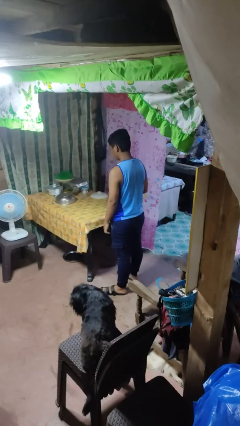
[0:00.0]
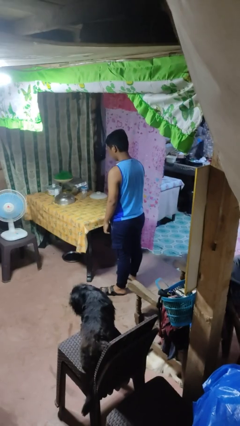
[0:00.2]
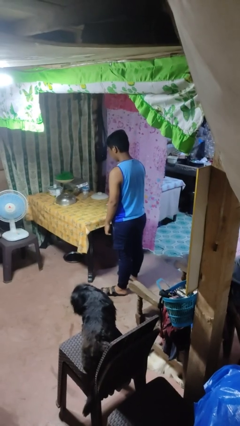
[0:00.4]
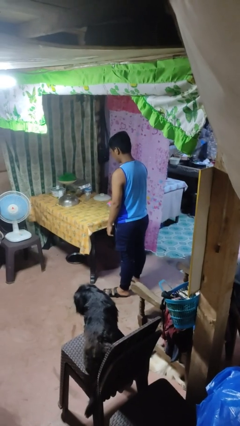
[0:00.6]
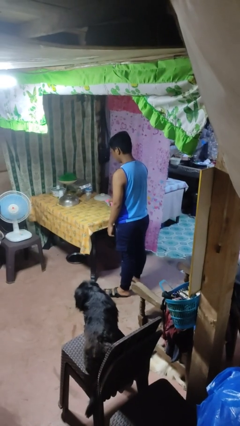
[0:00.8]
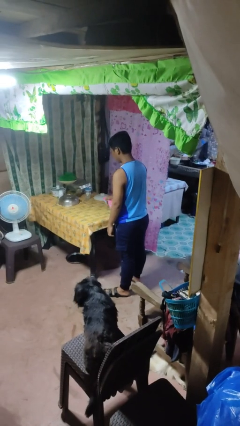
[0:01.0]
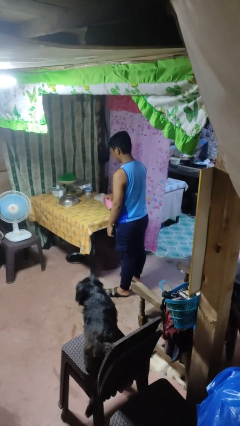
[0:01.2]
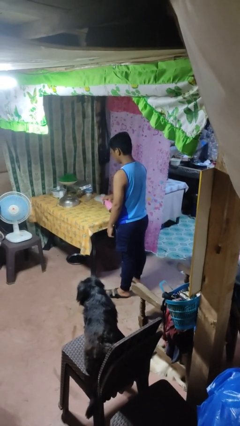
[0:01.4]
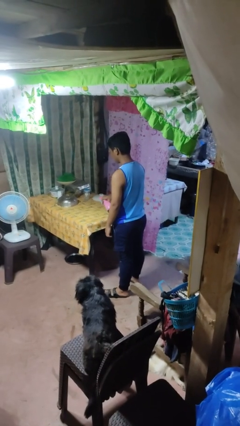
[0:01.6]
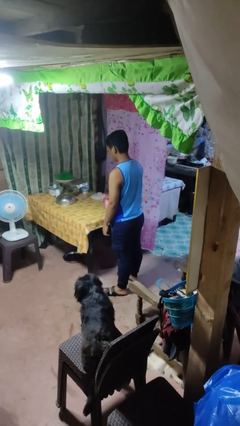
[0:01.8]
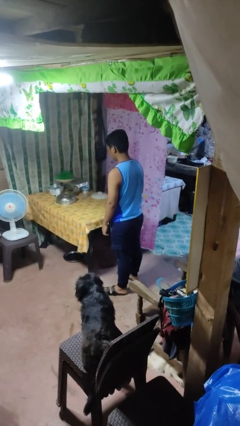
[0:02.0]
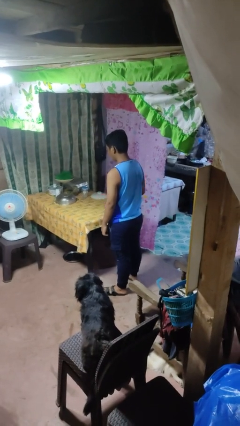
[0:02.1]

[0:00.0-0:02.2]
person sprays from bottle

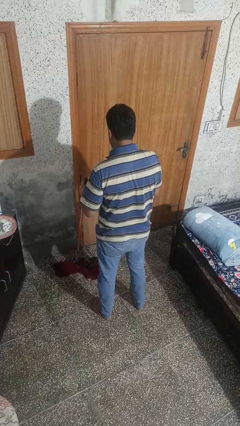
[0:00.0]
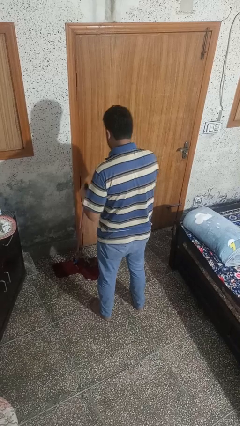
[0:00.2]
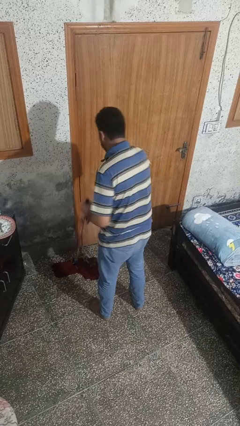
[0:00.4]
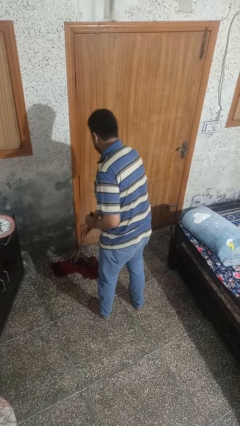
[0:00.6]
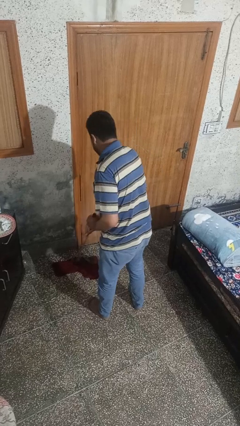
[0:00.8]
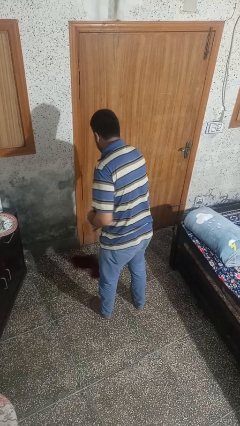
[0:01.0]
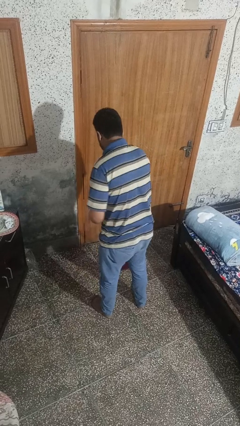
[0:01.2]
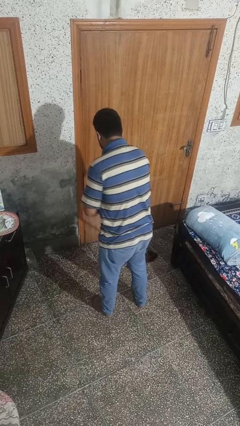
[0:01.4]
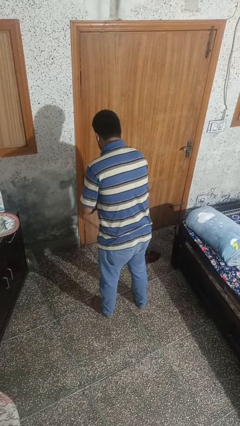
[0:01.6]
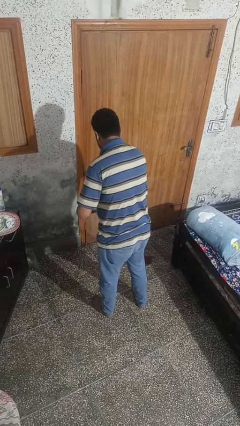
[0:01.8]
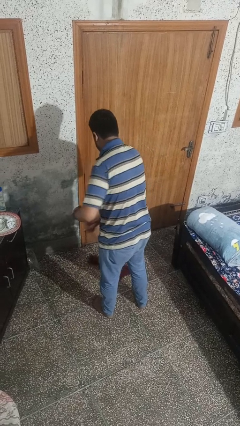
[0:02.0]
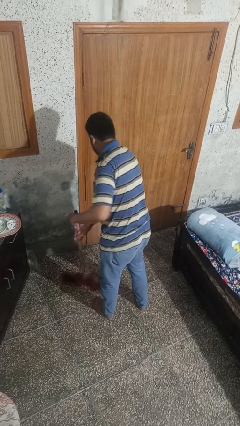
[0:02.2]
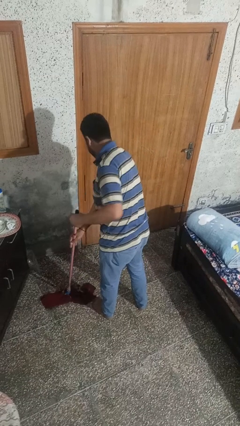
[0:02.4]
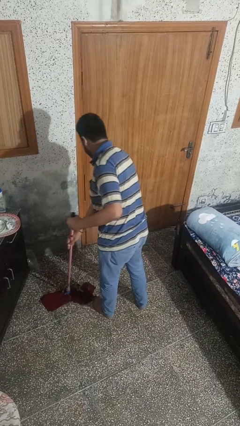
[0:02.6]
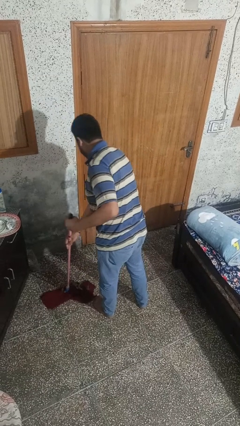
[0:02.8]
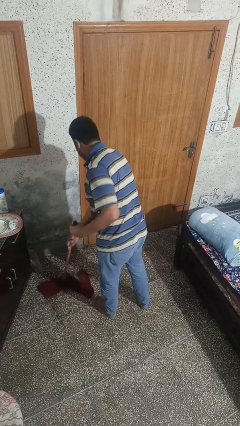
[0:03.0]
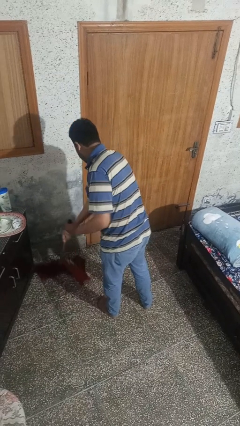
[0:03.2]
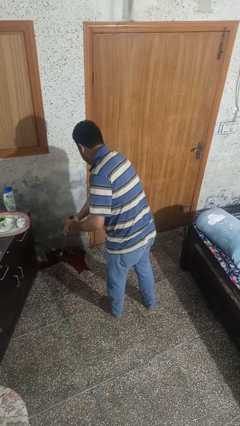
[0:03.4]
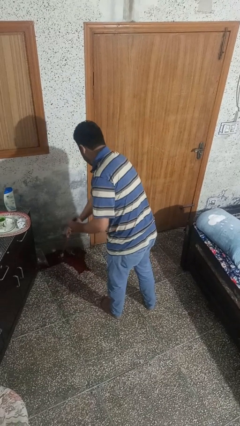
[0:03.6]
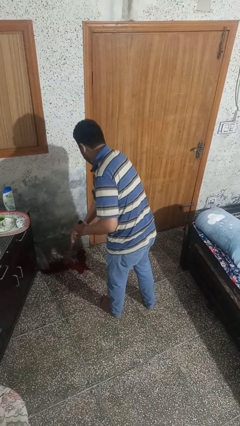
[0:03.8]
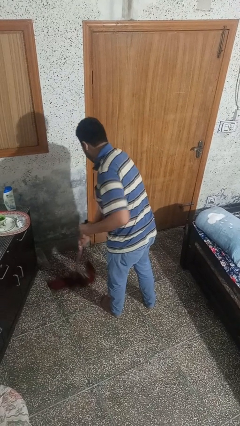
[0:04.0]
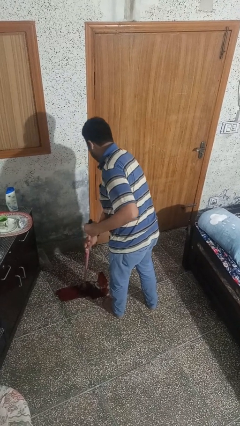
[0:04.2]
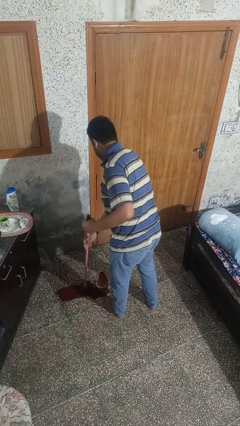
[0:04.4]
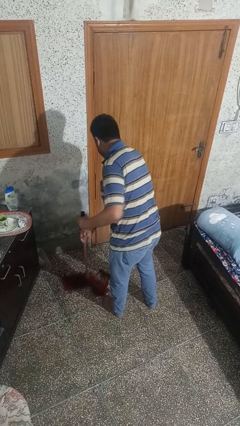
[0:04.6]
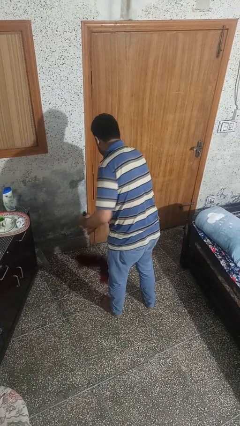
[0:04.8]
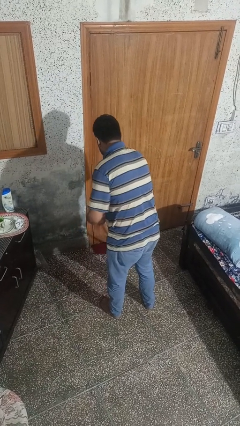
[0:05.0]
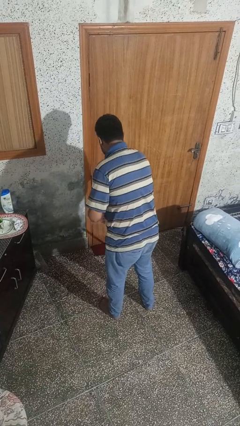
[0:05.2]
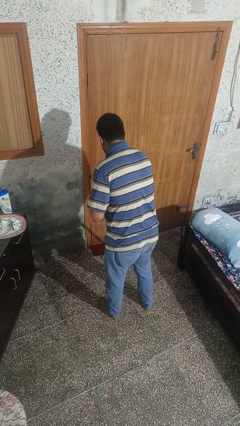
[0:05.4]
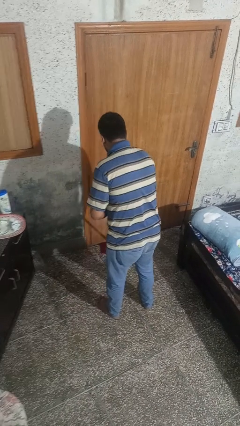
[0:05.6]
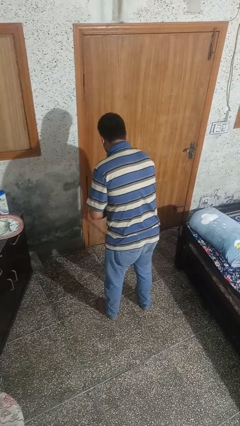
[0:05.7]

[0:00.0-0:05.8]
person mops

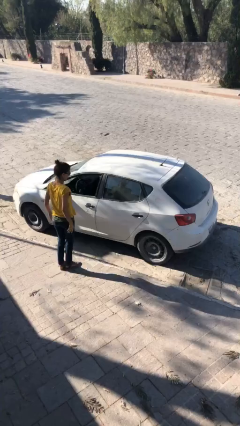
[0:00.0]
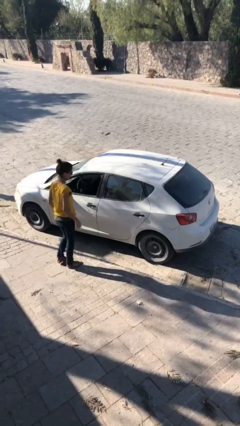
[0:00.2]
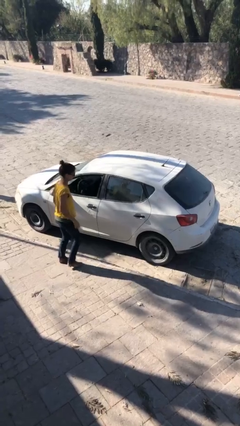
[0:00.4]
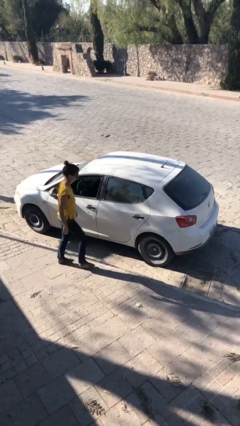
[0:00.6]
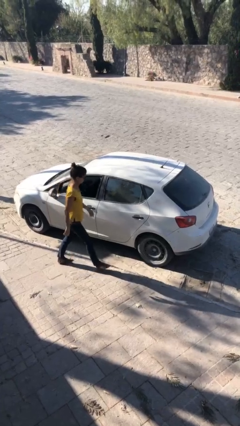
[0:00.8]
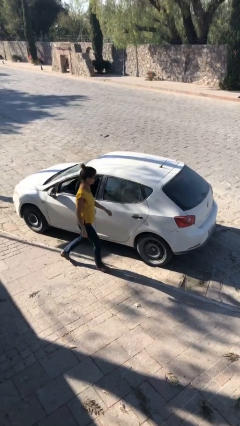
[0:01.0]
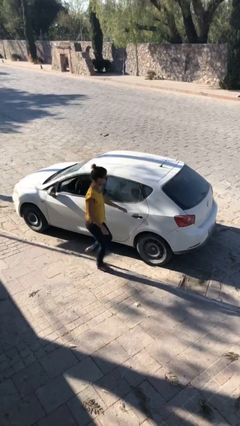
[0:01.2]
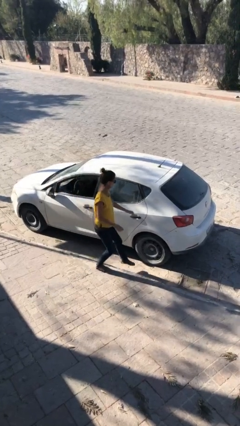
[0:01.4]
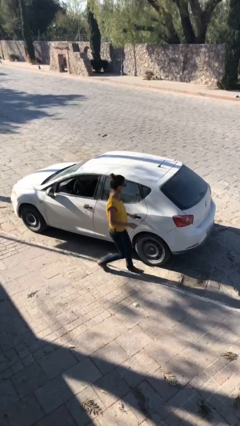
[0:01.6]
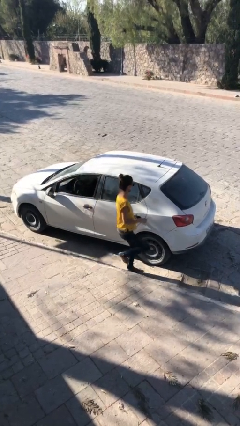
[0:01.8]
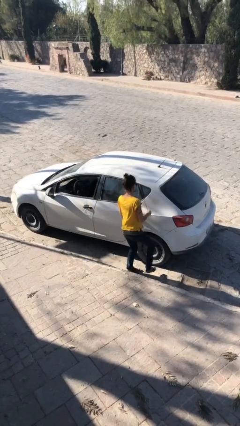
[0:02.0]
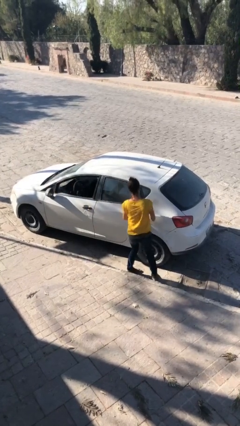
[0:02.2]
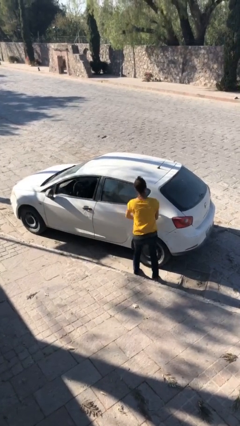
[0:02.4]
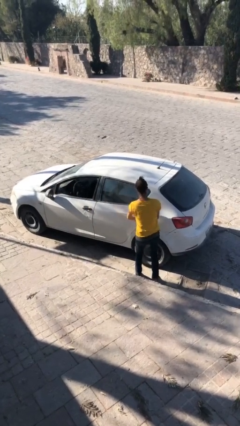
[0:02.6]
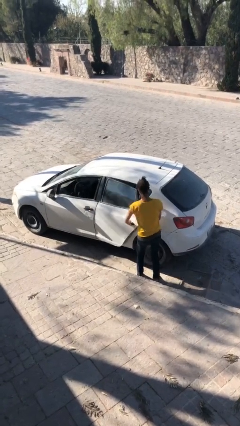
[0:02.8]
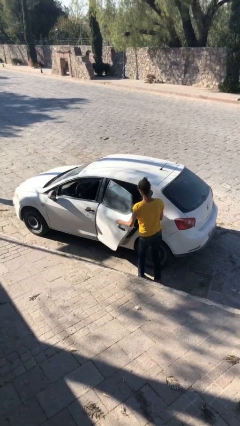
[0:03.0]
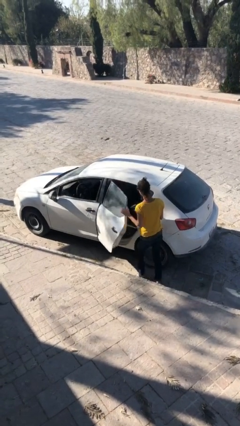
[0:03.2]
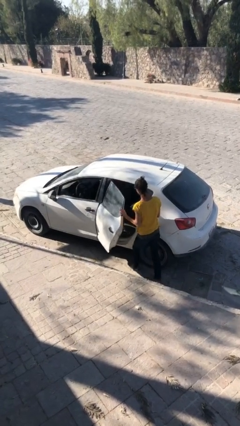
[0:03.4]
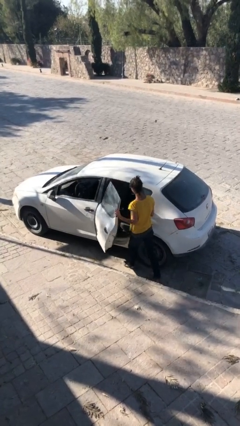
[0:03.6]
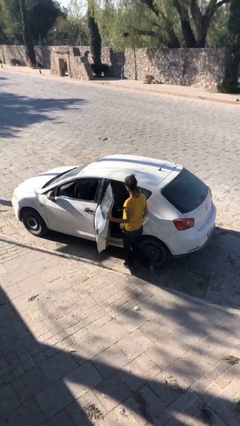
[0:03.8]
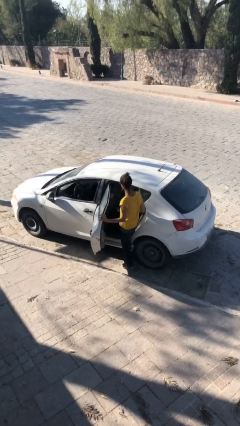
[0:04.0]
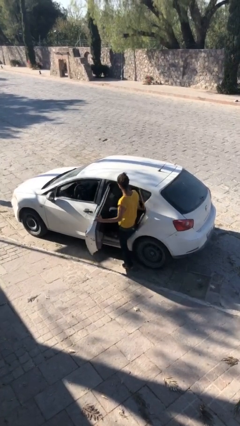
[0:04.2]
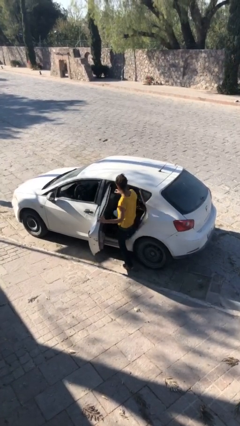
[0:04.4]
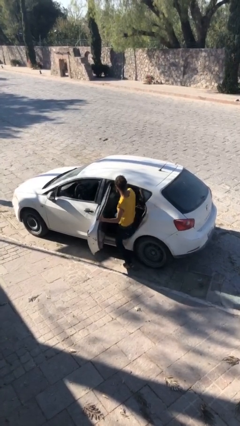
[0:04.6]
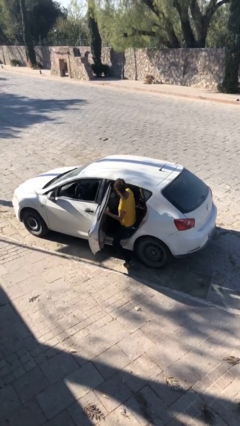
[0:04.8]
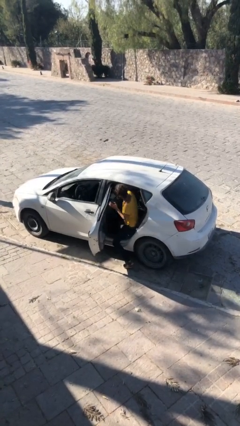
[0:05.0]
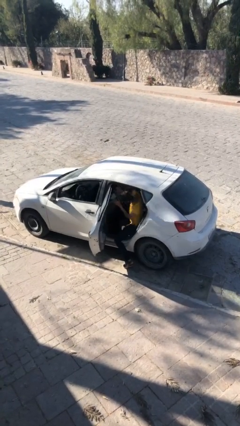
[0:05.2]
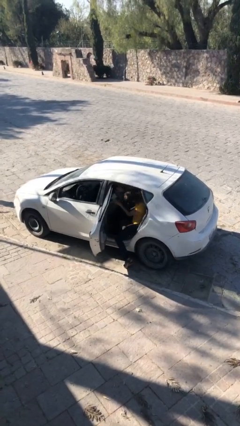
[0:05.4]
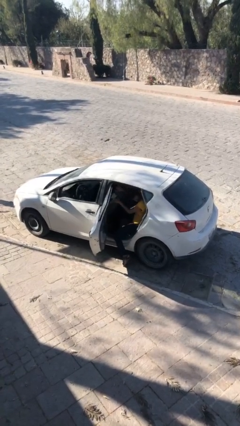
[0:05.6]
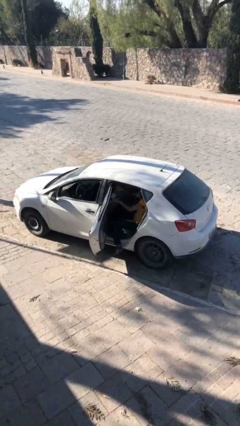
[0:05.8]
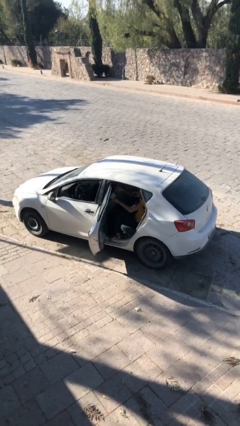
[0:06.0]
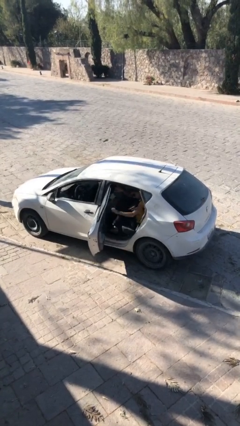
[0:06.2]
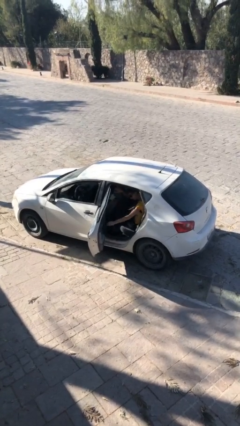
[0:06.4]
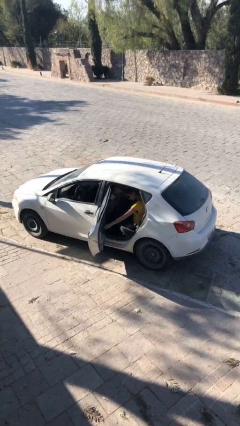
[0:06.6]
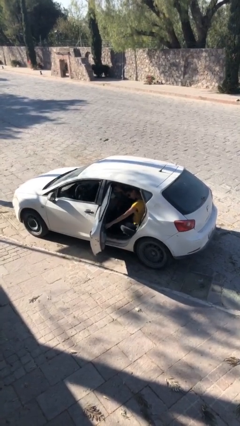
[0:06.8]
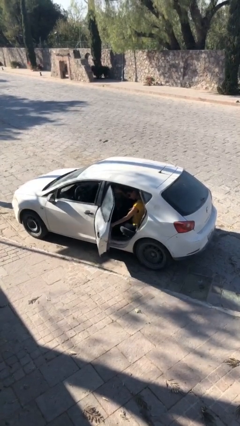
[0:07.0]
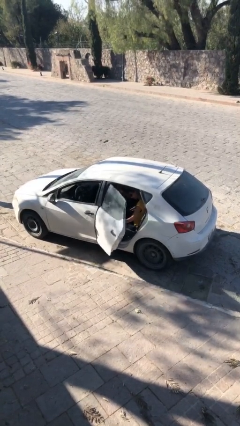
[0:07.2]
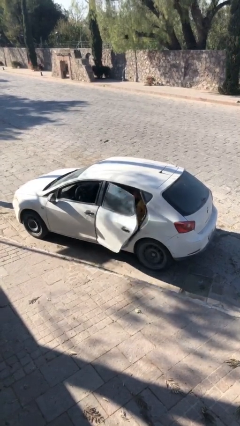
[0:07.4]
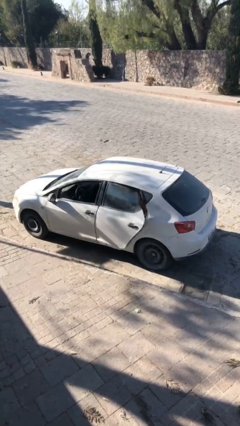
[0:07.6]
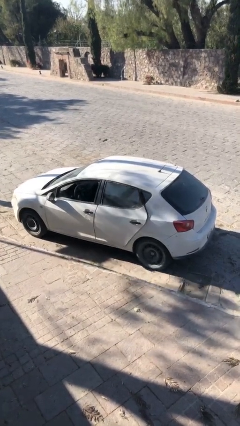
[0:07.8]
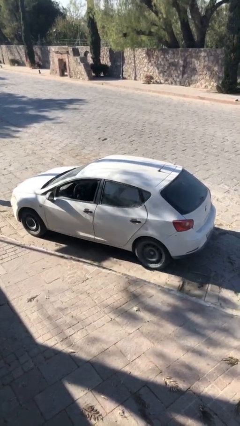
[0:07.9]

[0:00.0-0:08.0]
car picks up person

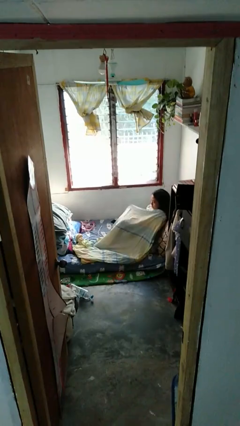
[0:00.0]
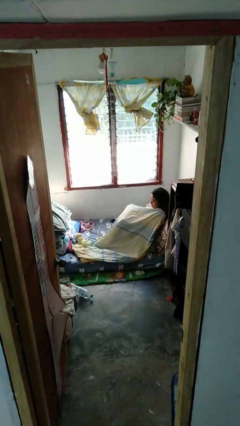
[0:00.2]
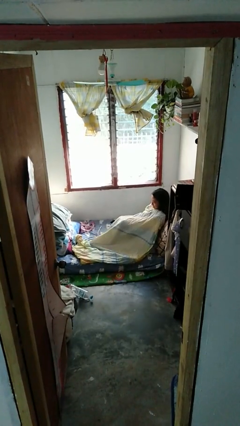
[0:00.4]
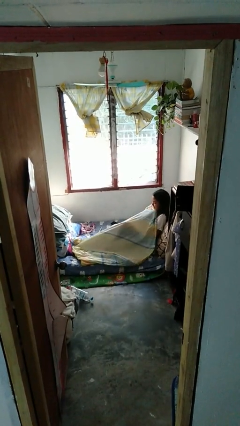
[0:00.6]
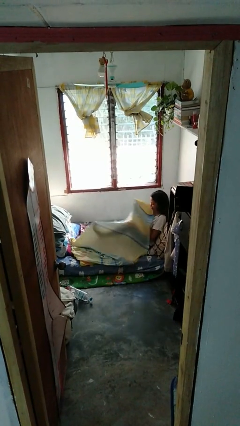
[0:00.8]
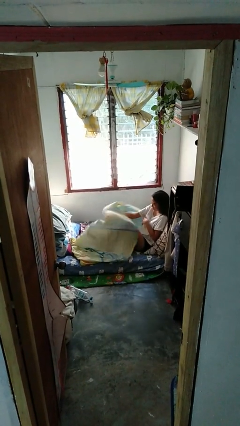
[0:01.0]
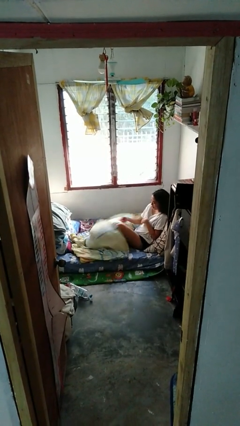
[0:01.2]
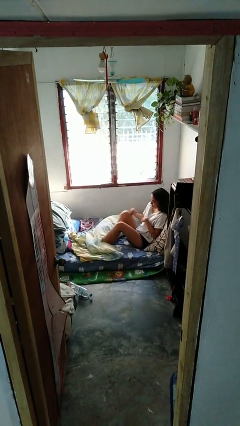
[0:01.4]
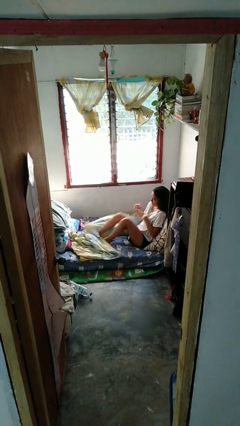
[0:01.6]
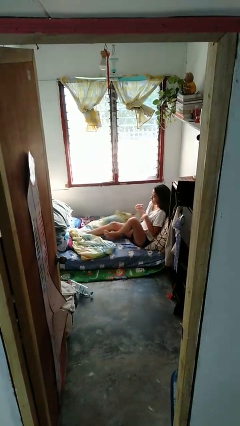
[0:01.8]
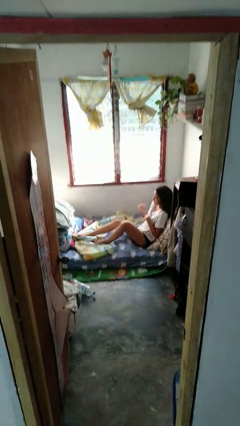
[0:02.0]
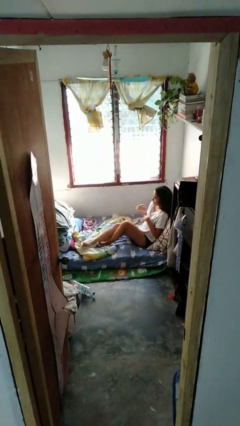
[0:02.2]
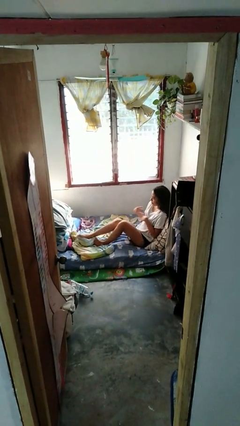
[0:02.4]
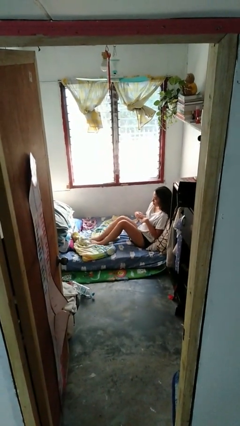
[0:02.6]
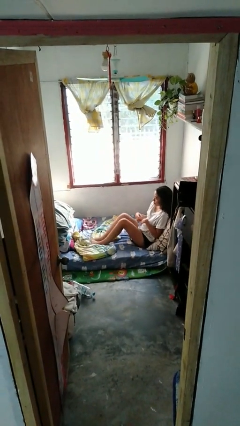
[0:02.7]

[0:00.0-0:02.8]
person uncovers with bedsheets
